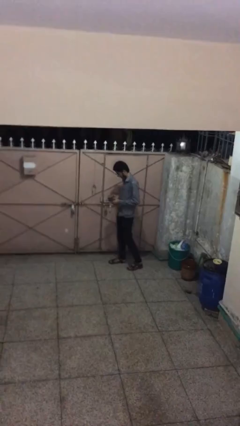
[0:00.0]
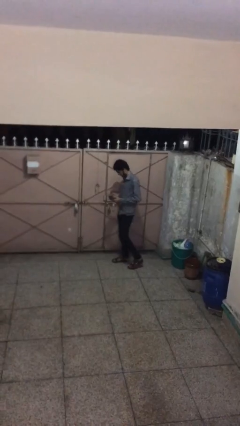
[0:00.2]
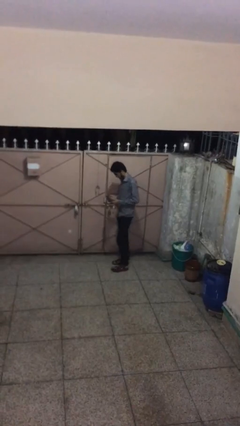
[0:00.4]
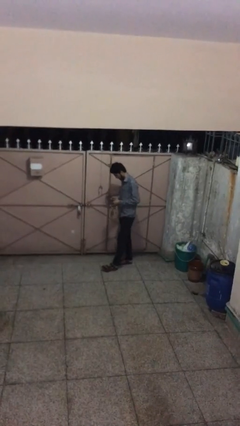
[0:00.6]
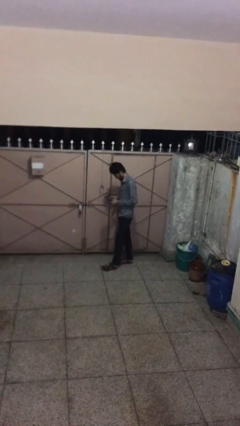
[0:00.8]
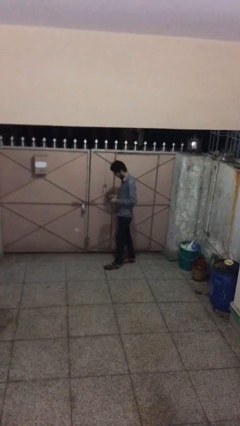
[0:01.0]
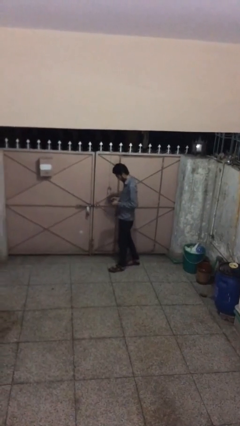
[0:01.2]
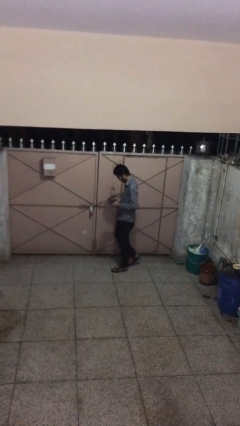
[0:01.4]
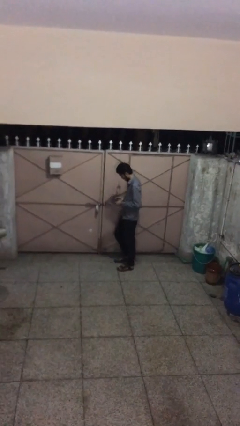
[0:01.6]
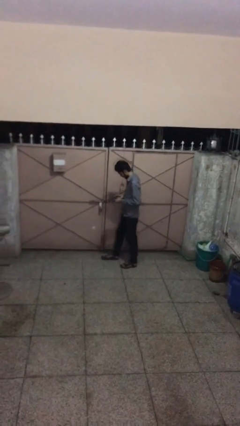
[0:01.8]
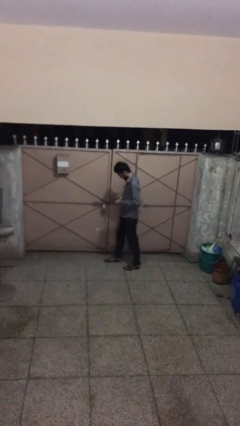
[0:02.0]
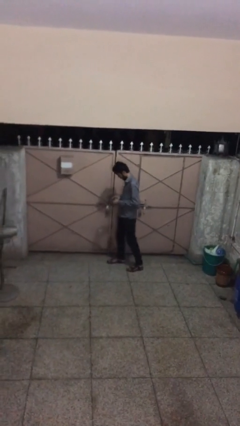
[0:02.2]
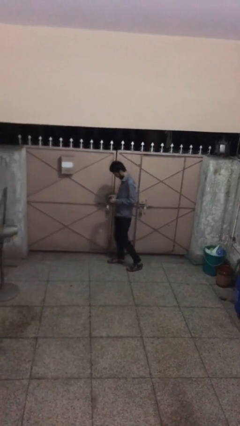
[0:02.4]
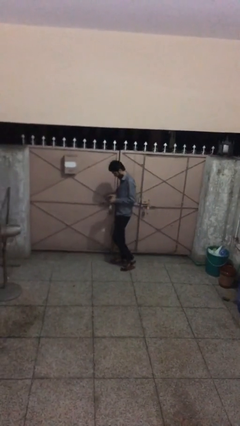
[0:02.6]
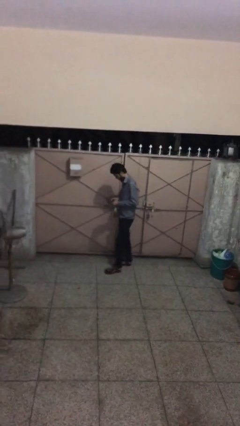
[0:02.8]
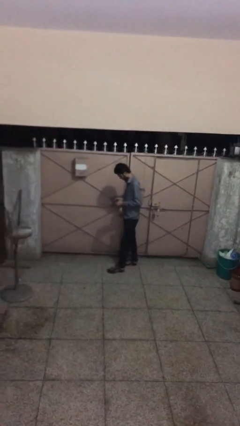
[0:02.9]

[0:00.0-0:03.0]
person texts on phone

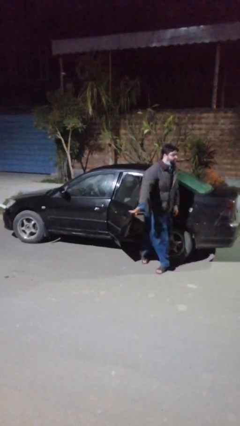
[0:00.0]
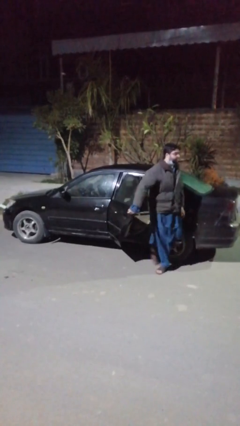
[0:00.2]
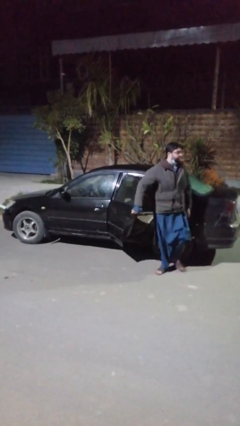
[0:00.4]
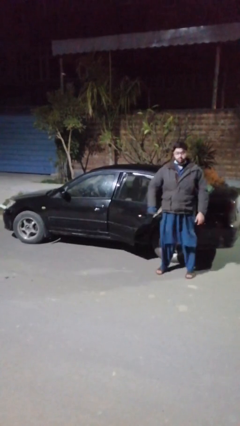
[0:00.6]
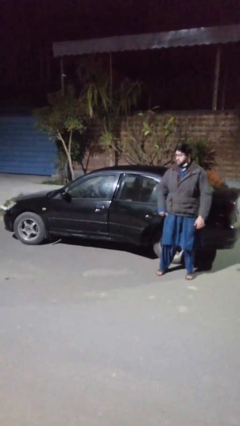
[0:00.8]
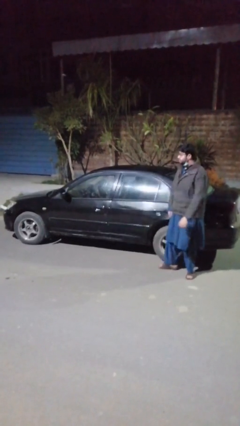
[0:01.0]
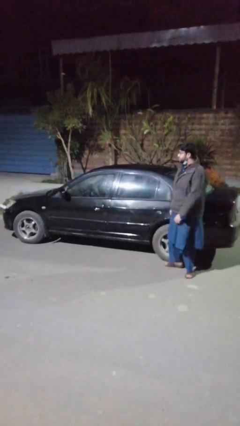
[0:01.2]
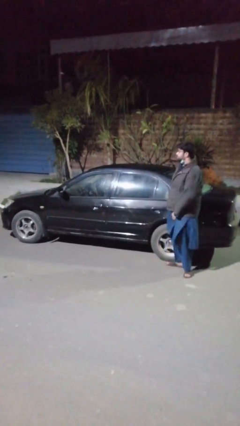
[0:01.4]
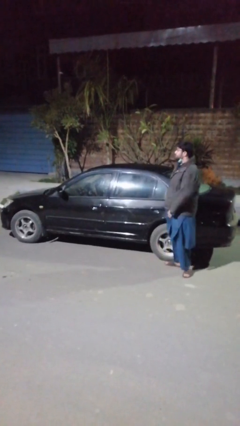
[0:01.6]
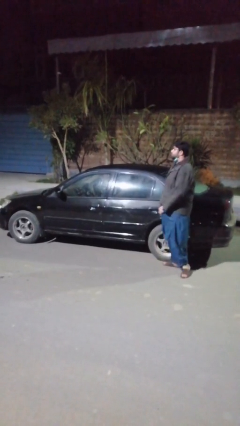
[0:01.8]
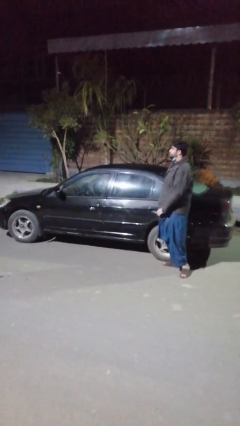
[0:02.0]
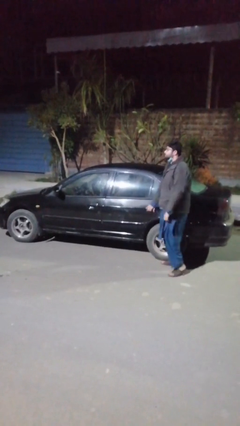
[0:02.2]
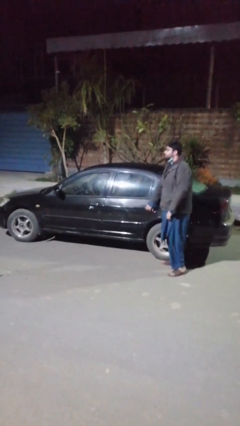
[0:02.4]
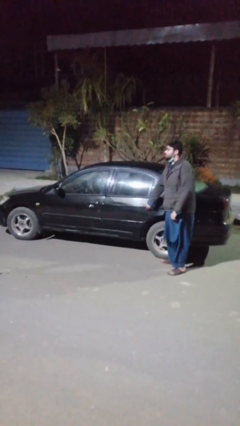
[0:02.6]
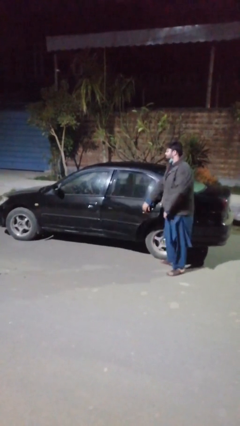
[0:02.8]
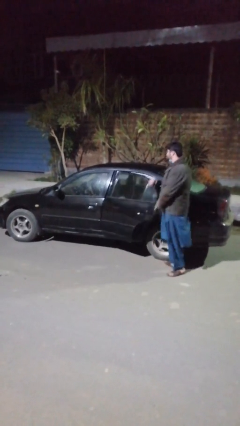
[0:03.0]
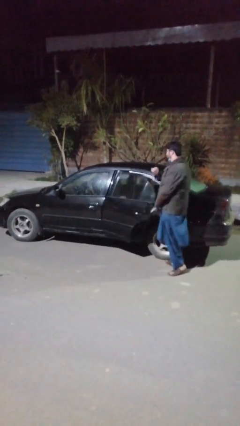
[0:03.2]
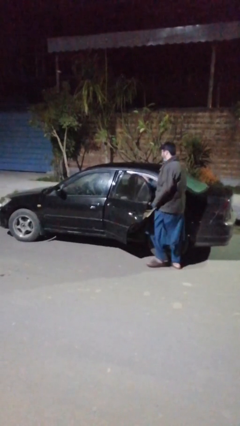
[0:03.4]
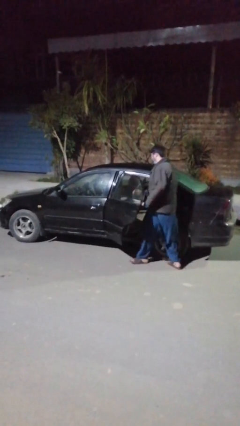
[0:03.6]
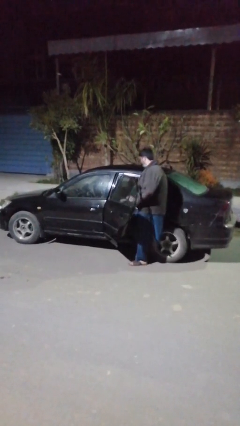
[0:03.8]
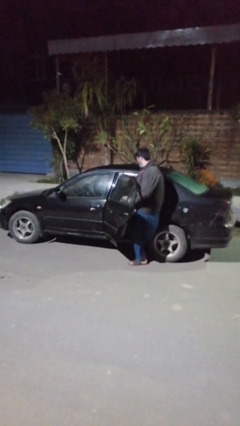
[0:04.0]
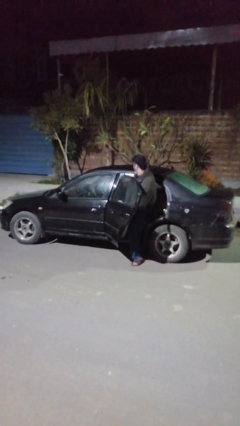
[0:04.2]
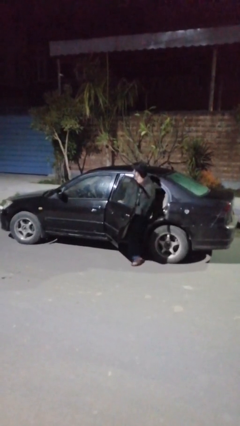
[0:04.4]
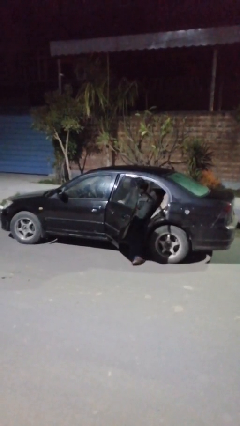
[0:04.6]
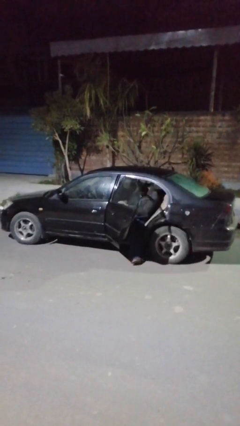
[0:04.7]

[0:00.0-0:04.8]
car drops off person

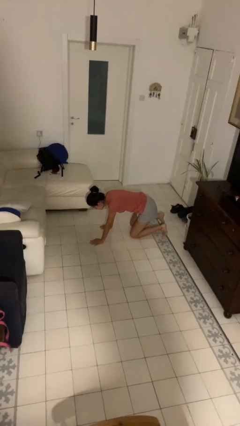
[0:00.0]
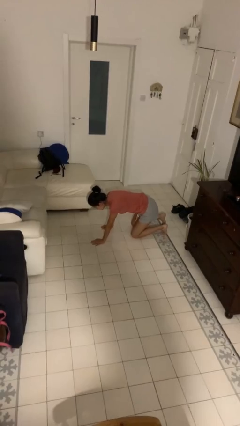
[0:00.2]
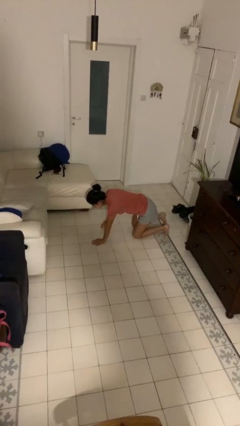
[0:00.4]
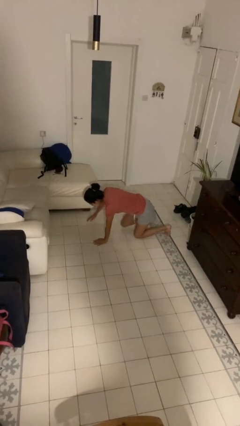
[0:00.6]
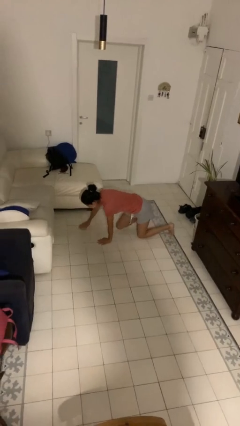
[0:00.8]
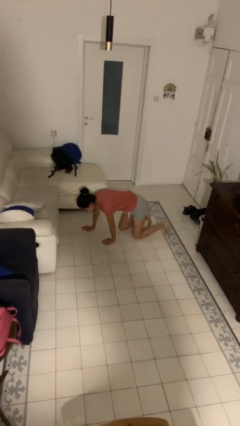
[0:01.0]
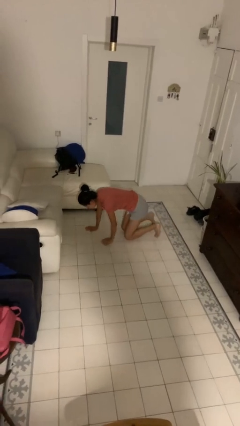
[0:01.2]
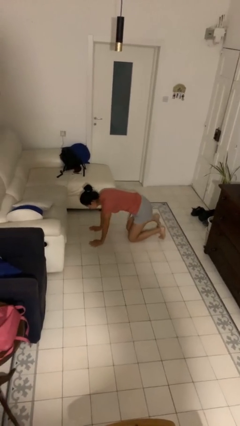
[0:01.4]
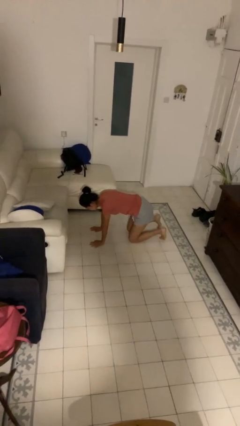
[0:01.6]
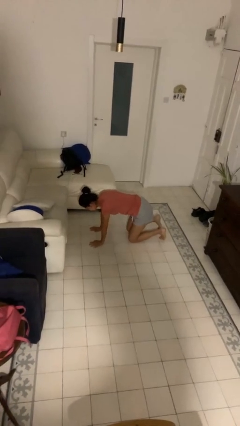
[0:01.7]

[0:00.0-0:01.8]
person crawls

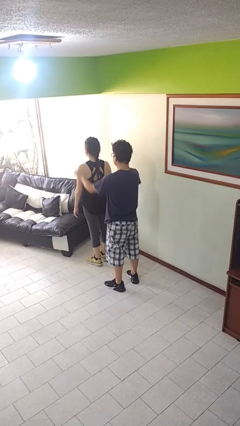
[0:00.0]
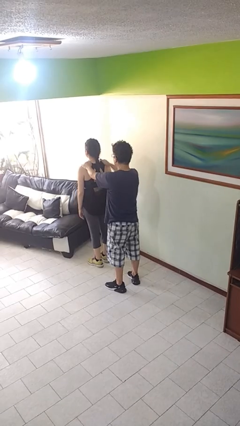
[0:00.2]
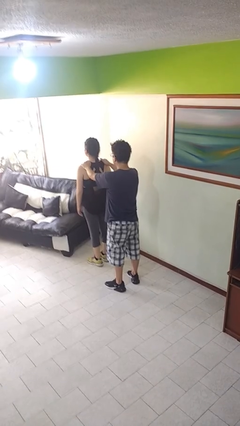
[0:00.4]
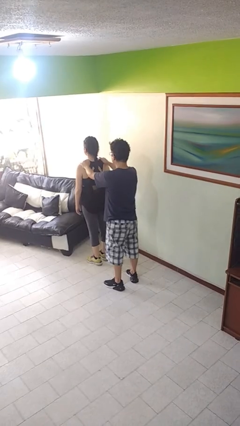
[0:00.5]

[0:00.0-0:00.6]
person grabs person by shoulder

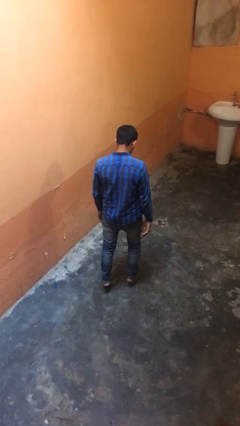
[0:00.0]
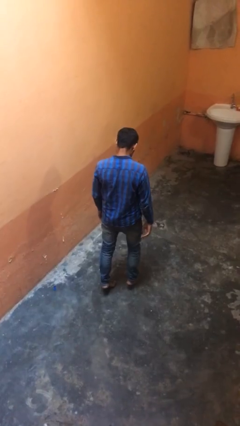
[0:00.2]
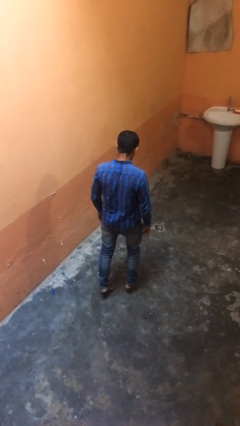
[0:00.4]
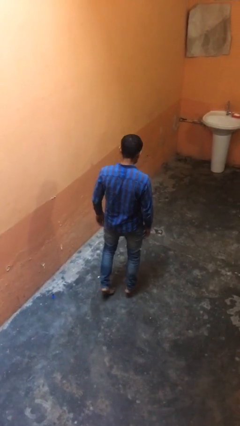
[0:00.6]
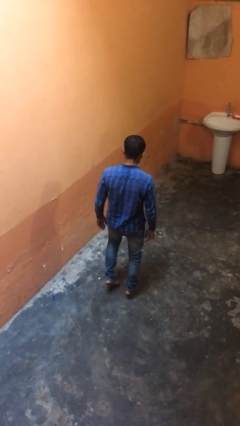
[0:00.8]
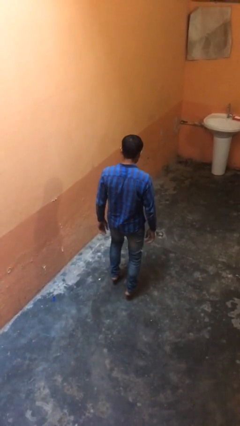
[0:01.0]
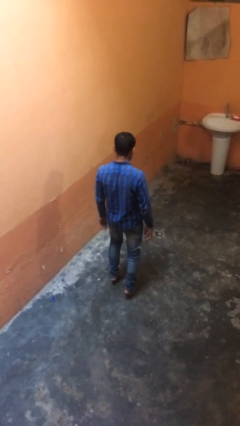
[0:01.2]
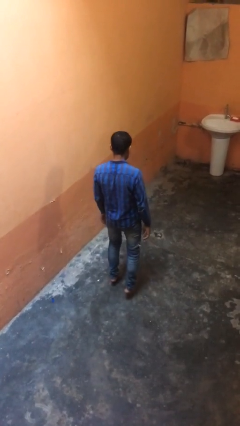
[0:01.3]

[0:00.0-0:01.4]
person walks tiptoe

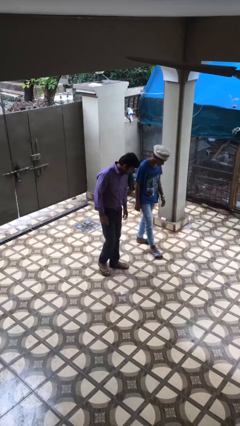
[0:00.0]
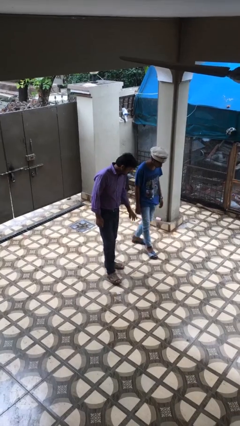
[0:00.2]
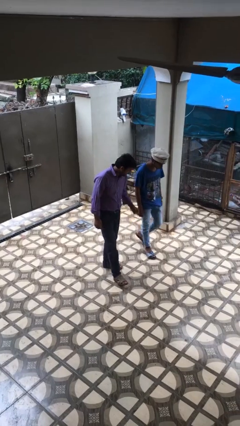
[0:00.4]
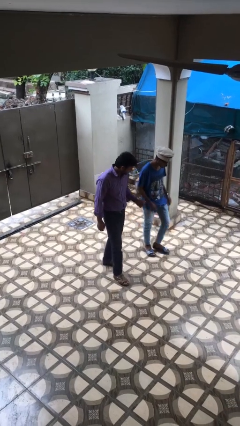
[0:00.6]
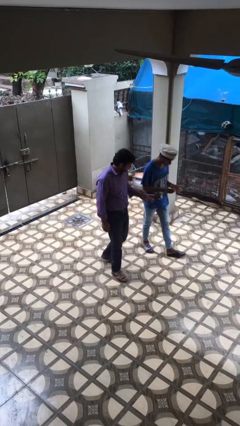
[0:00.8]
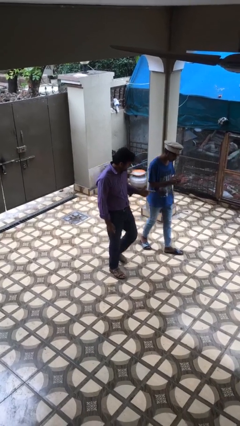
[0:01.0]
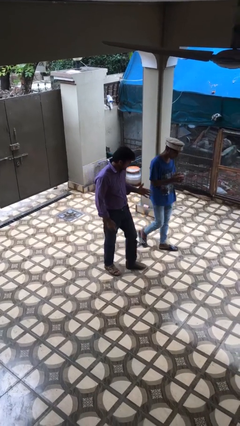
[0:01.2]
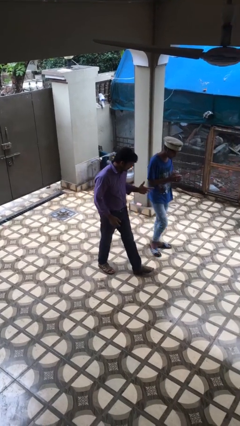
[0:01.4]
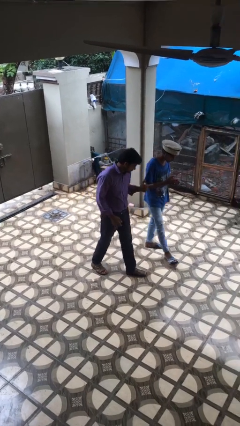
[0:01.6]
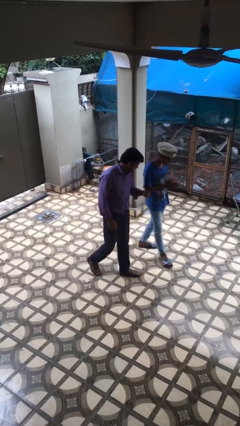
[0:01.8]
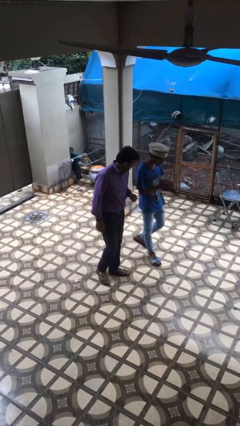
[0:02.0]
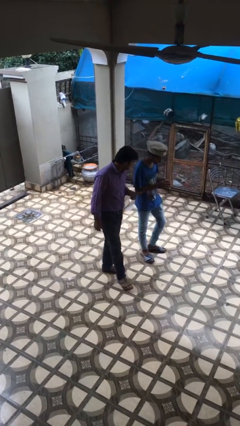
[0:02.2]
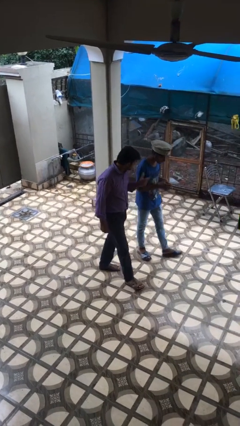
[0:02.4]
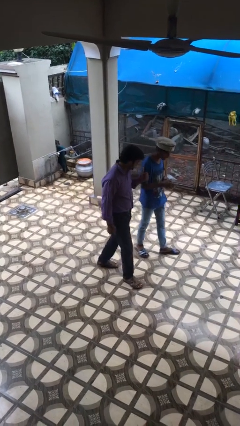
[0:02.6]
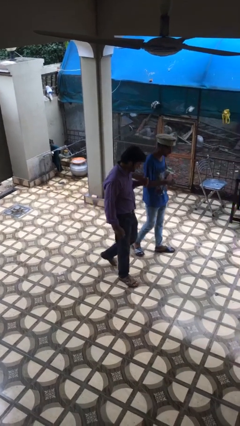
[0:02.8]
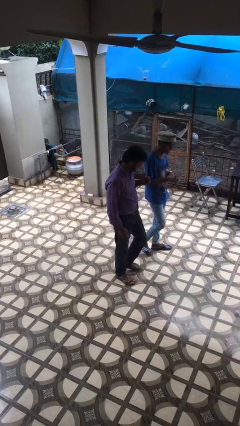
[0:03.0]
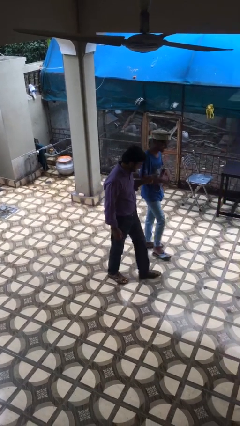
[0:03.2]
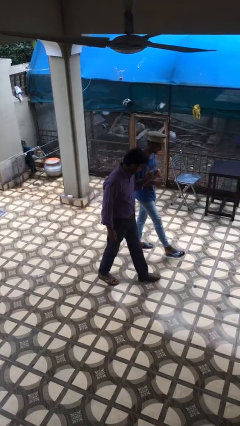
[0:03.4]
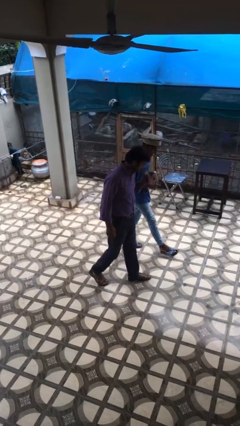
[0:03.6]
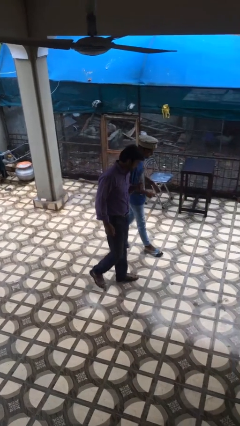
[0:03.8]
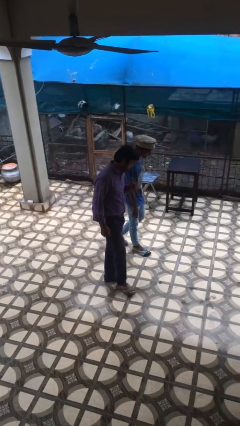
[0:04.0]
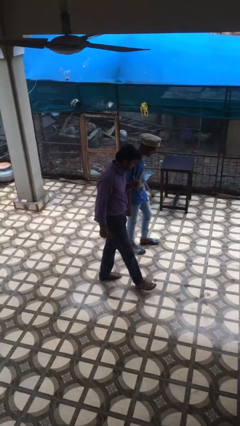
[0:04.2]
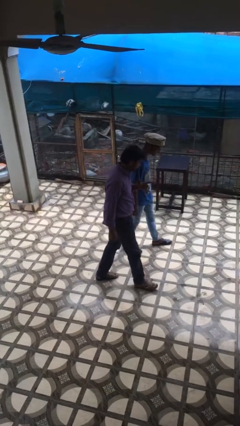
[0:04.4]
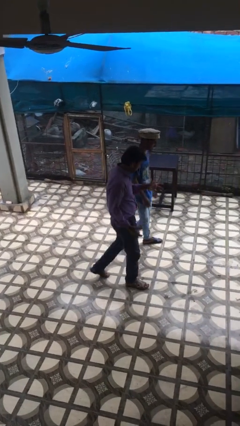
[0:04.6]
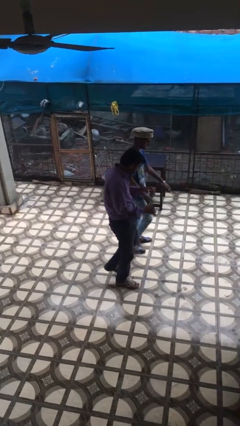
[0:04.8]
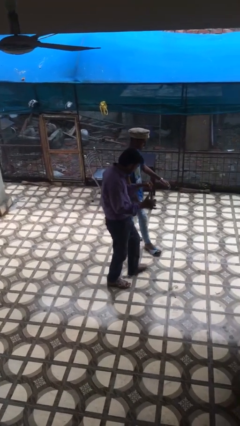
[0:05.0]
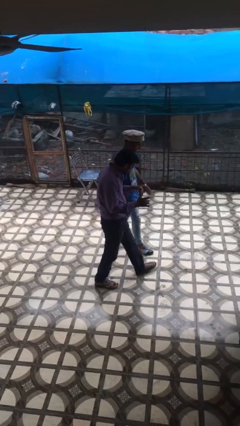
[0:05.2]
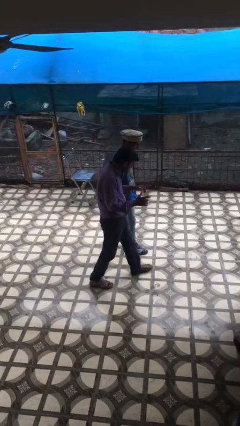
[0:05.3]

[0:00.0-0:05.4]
person talks to person

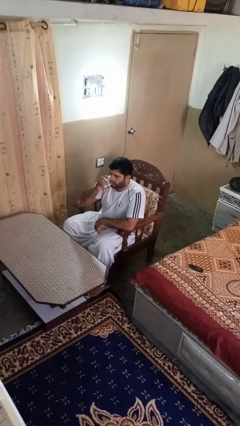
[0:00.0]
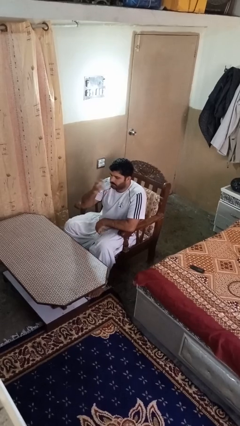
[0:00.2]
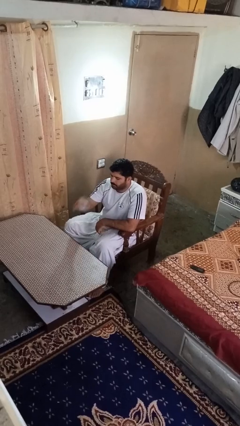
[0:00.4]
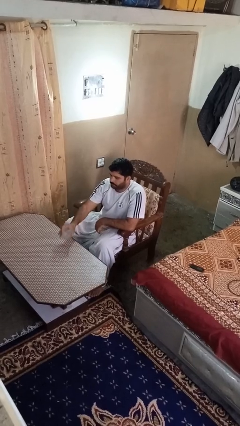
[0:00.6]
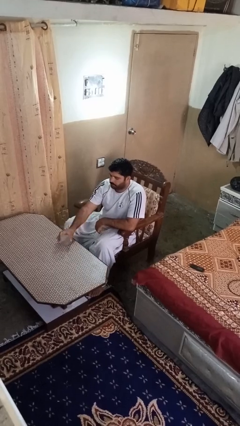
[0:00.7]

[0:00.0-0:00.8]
person puts down object on table
